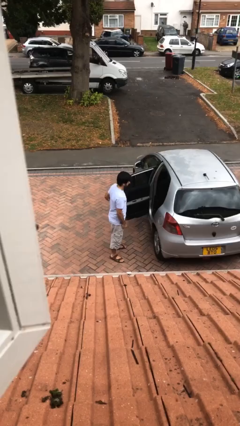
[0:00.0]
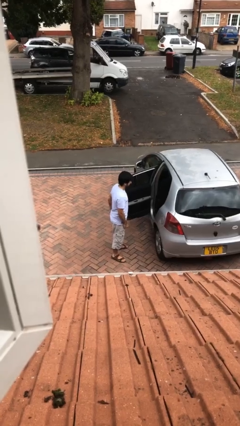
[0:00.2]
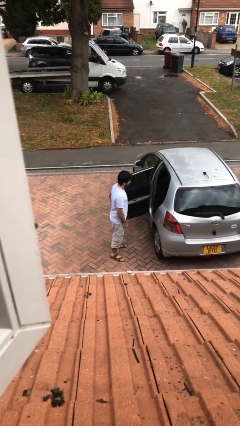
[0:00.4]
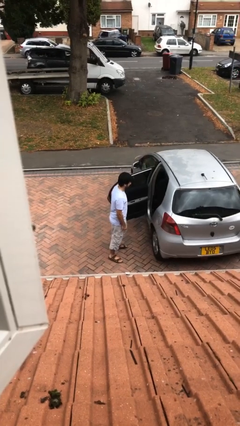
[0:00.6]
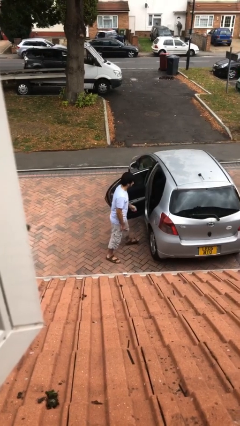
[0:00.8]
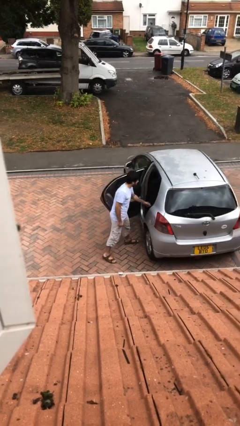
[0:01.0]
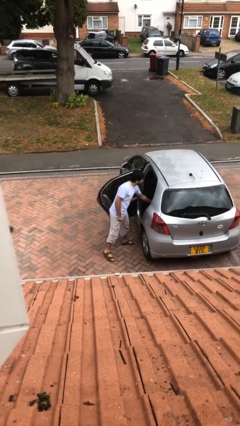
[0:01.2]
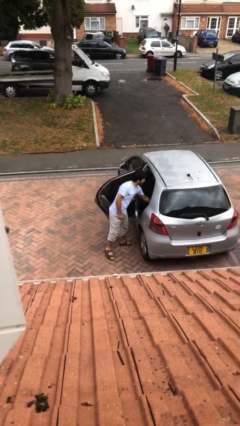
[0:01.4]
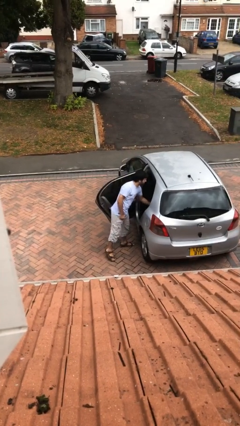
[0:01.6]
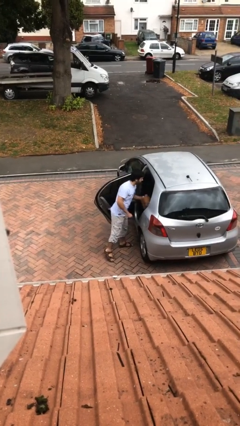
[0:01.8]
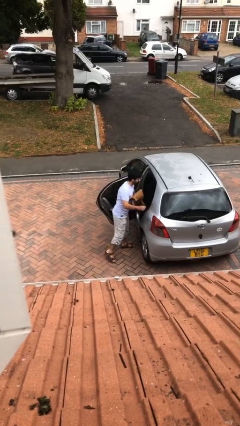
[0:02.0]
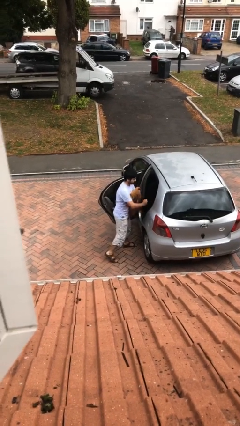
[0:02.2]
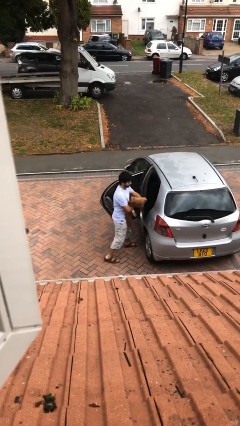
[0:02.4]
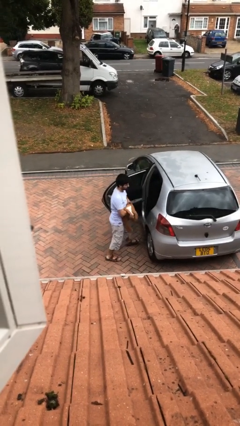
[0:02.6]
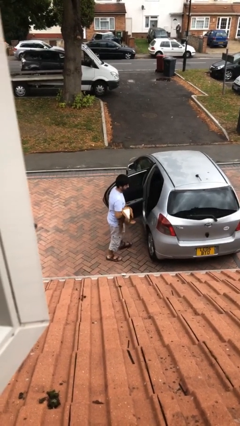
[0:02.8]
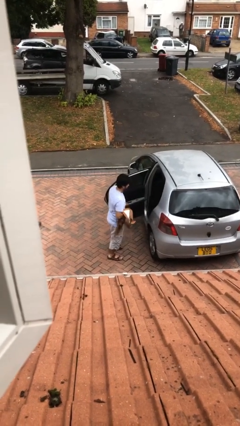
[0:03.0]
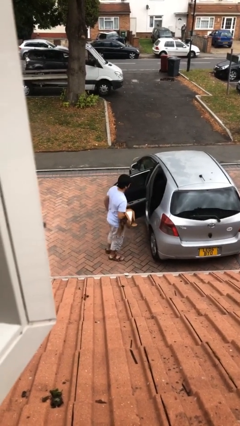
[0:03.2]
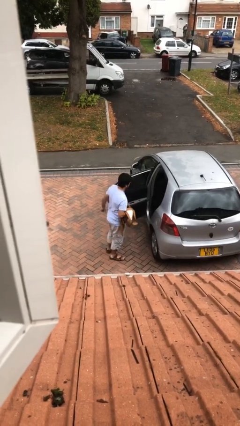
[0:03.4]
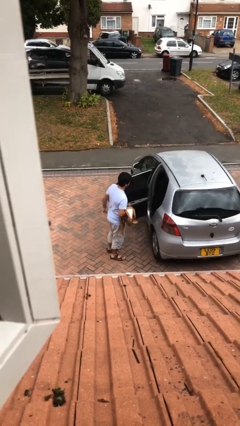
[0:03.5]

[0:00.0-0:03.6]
person unloads car

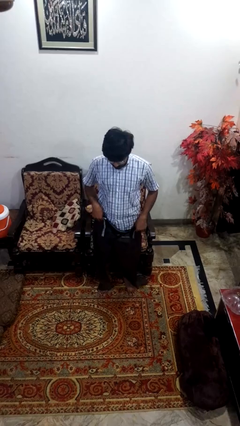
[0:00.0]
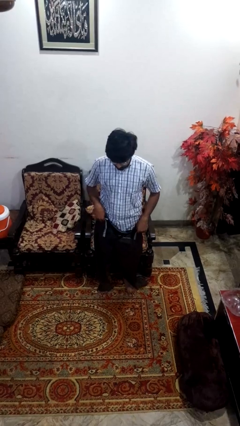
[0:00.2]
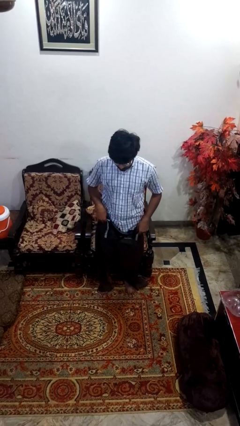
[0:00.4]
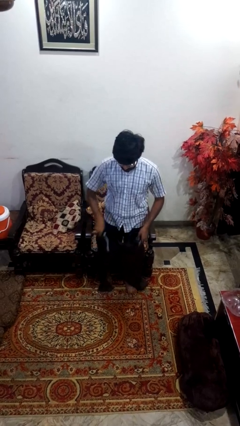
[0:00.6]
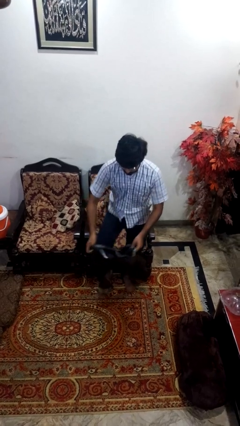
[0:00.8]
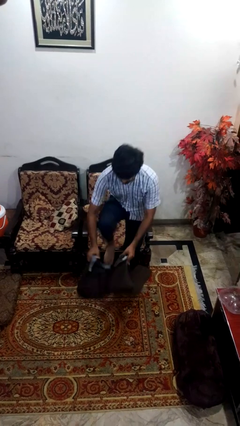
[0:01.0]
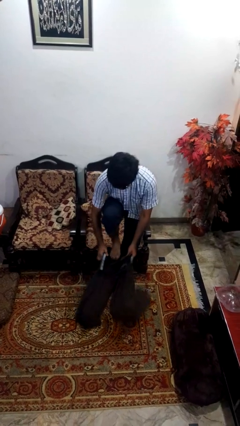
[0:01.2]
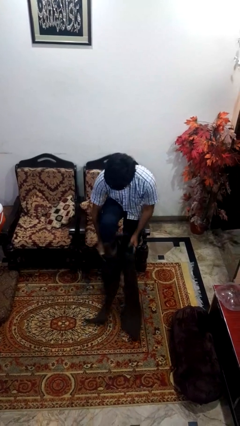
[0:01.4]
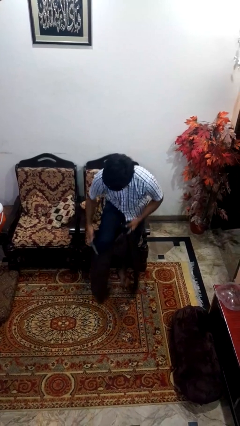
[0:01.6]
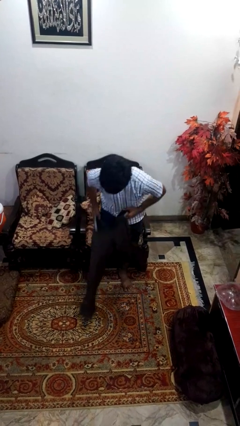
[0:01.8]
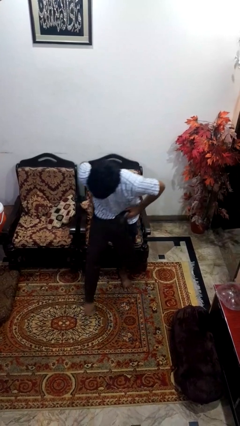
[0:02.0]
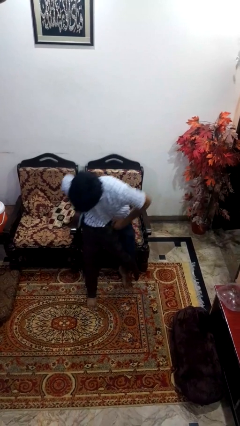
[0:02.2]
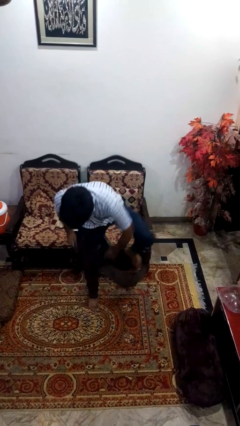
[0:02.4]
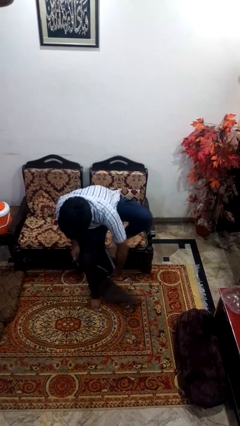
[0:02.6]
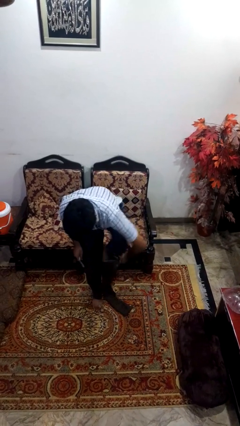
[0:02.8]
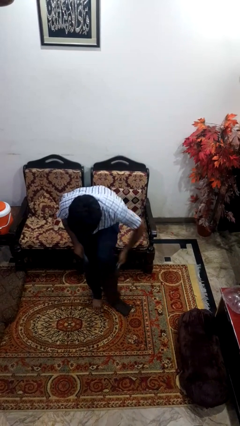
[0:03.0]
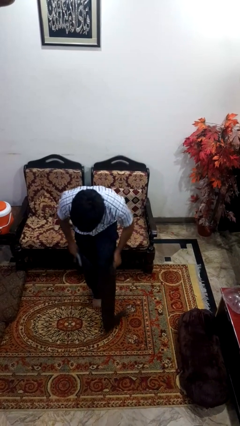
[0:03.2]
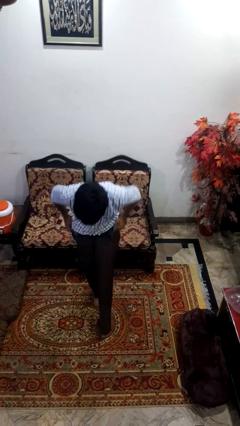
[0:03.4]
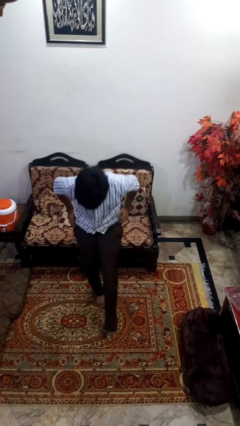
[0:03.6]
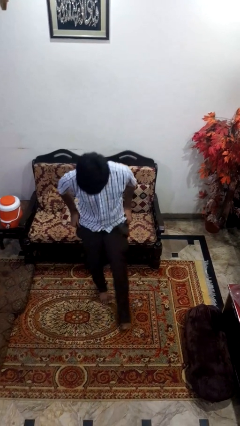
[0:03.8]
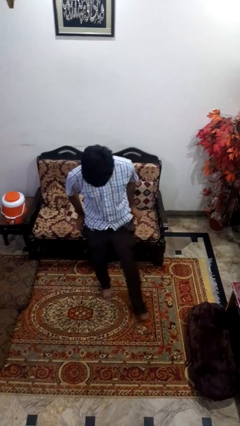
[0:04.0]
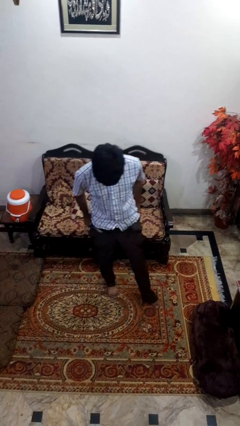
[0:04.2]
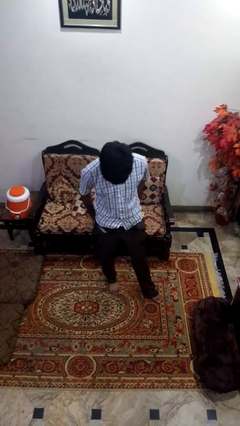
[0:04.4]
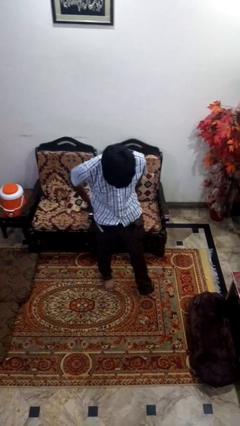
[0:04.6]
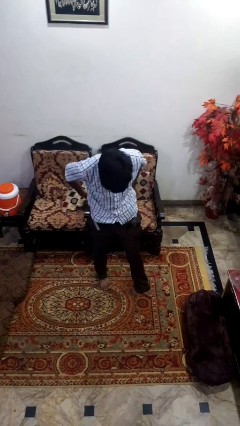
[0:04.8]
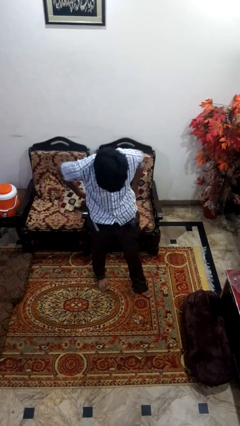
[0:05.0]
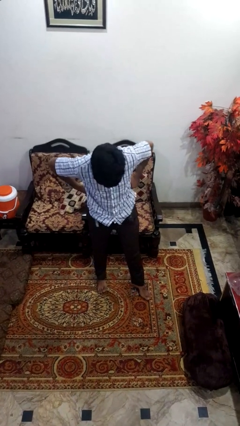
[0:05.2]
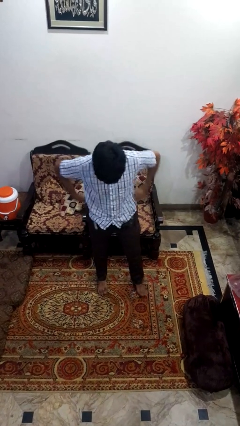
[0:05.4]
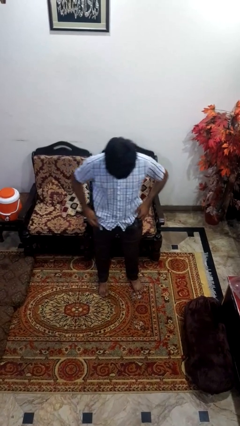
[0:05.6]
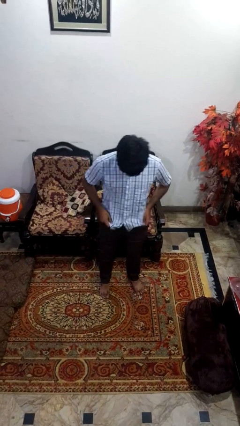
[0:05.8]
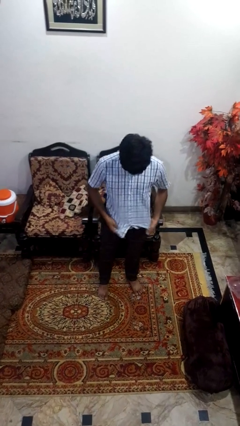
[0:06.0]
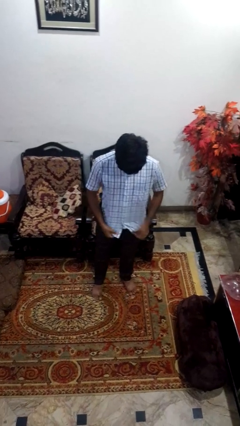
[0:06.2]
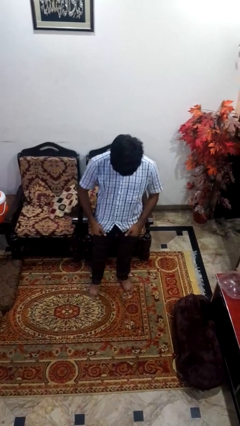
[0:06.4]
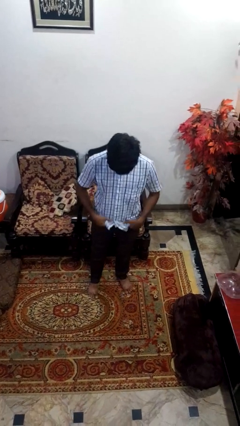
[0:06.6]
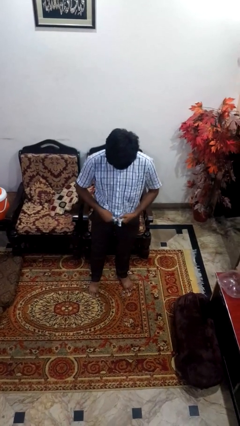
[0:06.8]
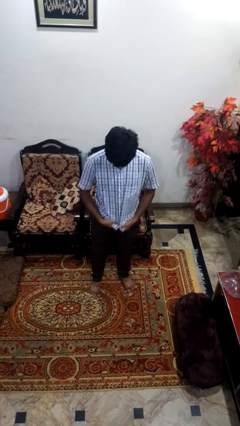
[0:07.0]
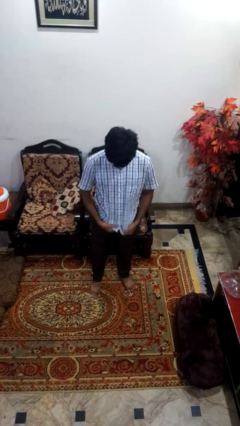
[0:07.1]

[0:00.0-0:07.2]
person puts on pants

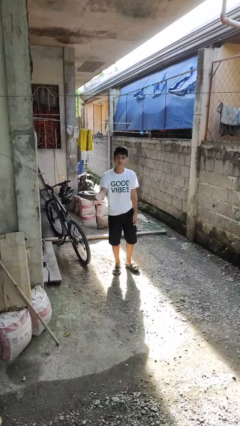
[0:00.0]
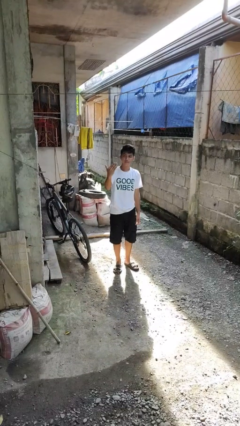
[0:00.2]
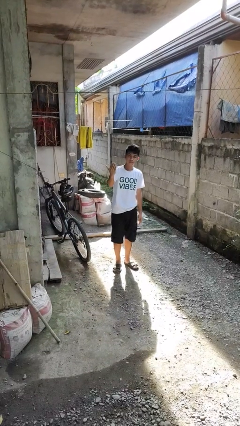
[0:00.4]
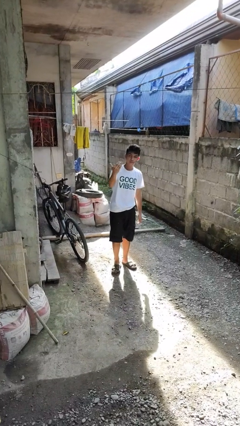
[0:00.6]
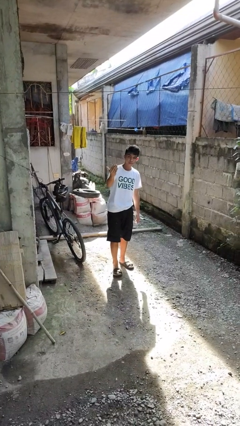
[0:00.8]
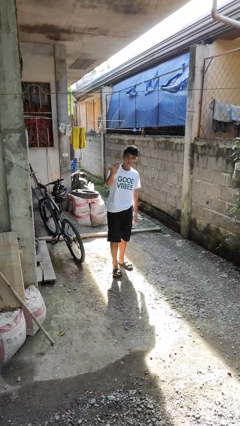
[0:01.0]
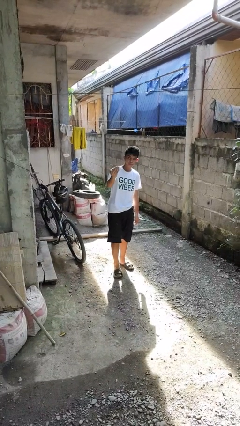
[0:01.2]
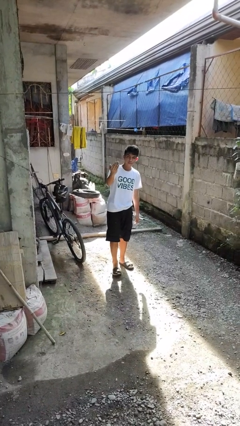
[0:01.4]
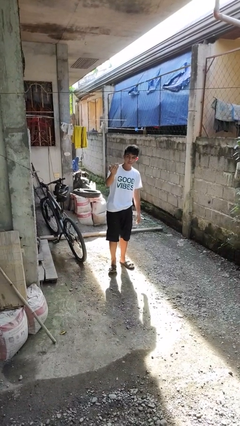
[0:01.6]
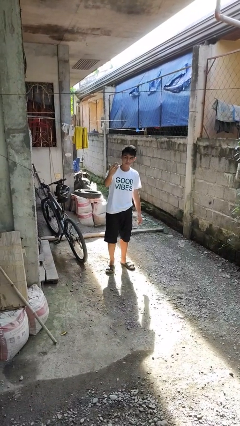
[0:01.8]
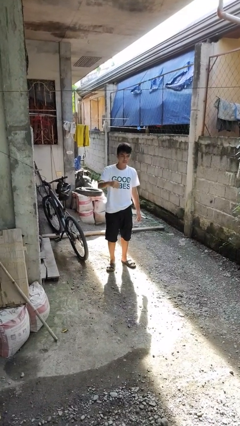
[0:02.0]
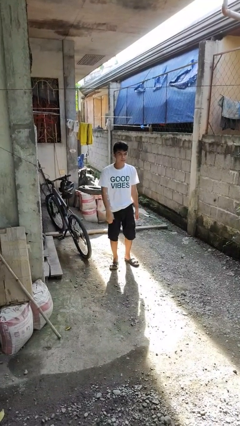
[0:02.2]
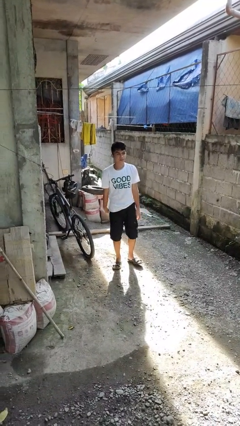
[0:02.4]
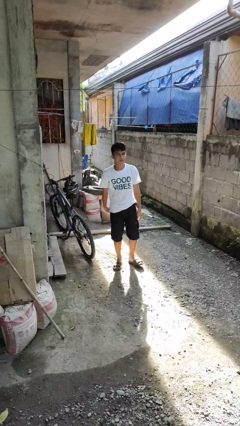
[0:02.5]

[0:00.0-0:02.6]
person gestures come here

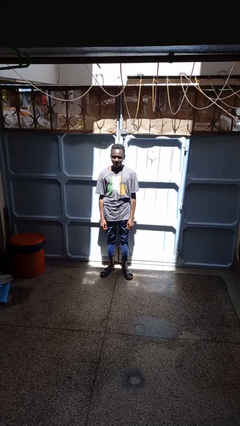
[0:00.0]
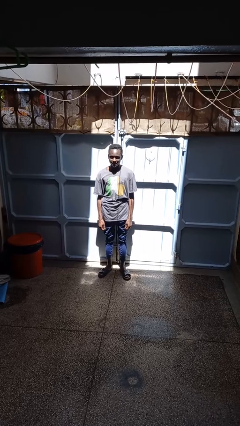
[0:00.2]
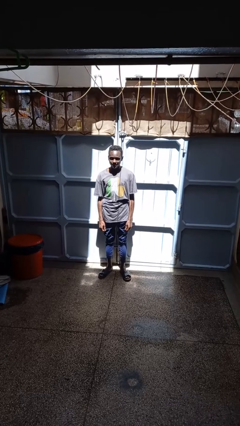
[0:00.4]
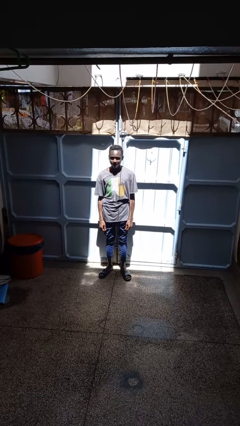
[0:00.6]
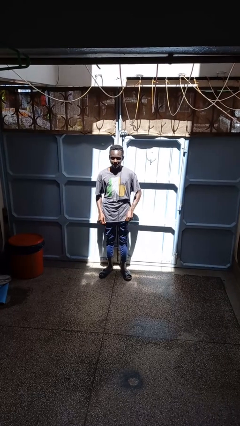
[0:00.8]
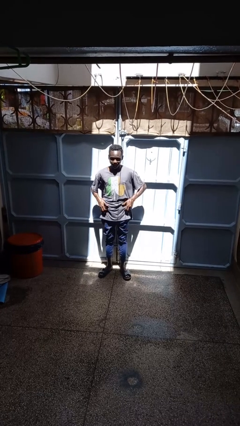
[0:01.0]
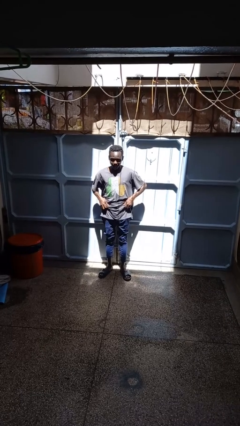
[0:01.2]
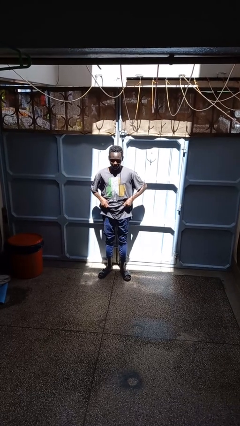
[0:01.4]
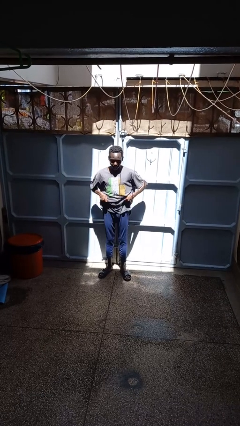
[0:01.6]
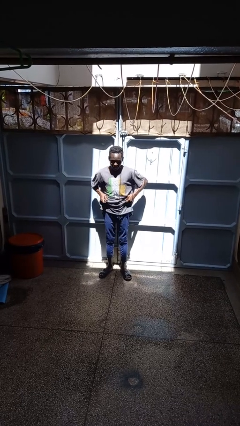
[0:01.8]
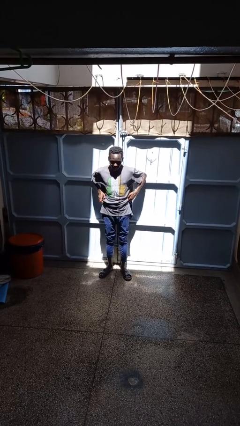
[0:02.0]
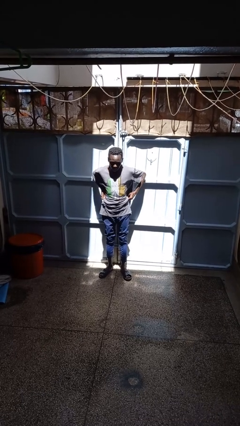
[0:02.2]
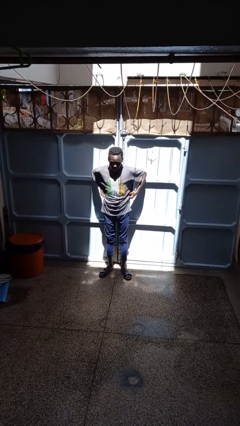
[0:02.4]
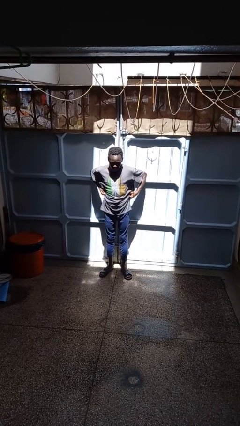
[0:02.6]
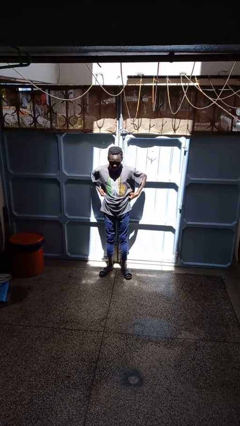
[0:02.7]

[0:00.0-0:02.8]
person hikes up pants

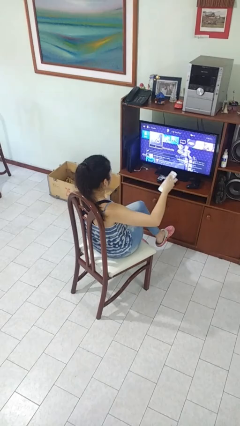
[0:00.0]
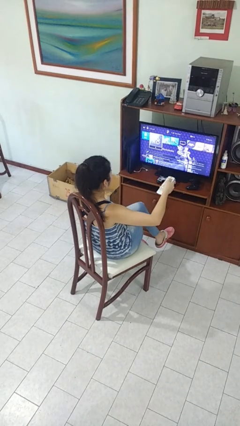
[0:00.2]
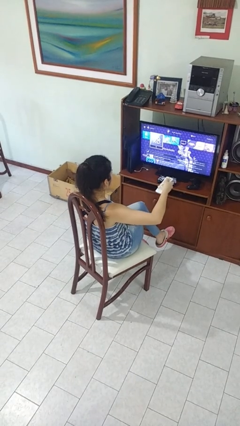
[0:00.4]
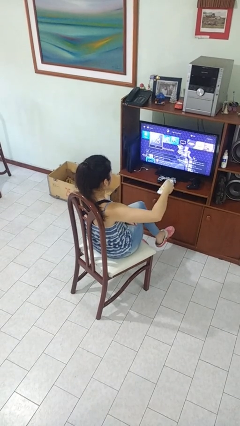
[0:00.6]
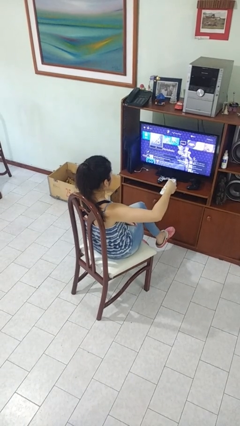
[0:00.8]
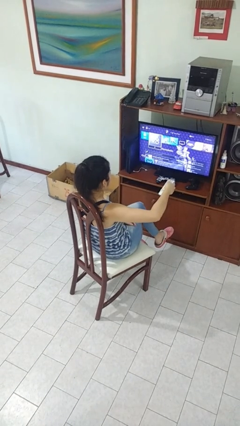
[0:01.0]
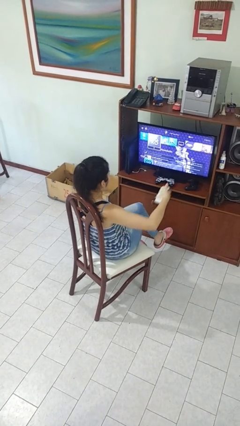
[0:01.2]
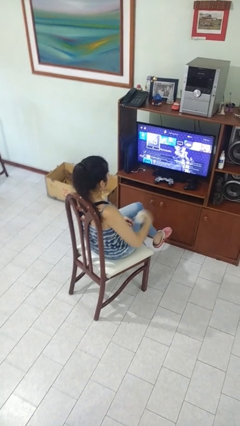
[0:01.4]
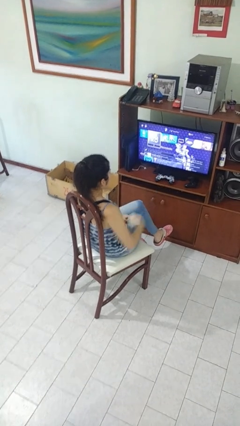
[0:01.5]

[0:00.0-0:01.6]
person uses television remote
